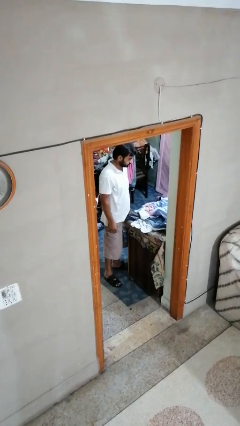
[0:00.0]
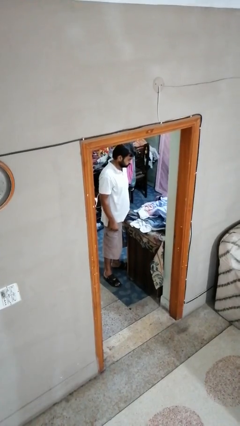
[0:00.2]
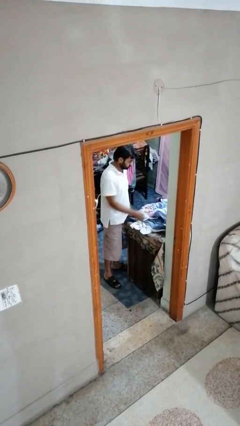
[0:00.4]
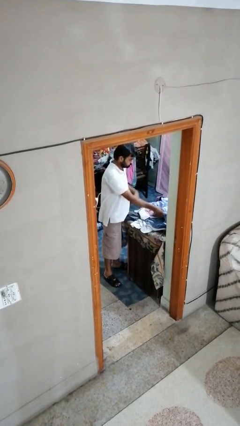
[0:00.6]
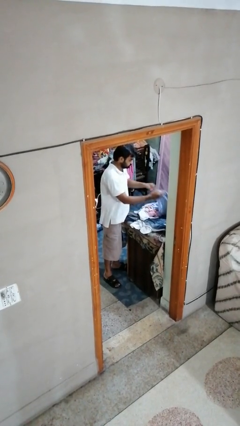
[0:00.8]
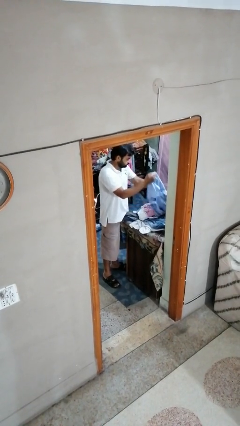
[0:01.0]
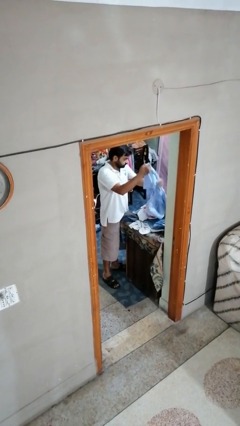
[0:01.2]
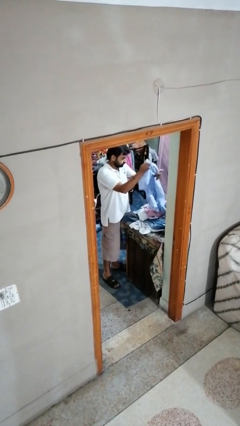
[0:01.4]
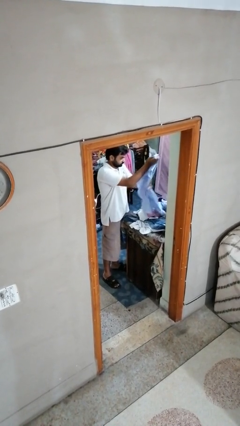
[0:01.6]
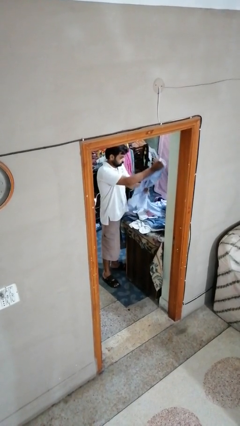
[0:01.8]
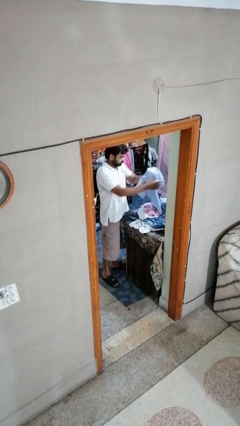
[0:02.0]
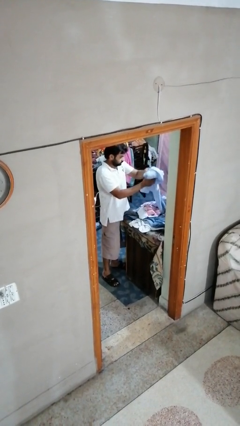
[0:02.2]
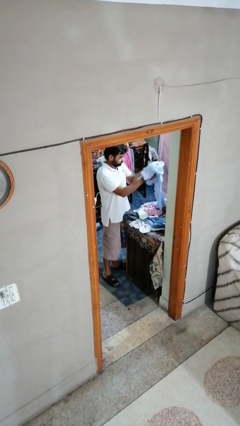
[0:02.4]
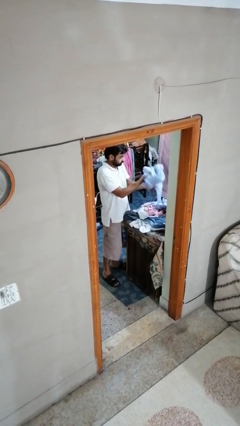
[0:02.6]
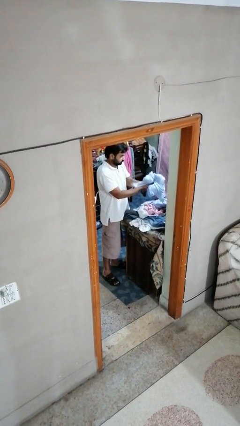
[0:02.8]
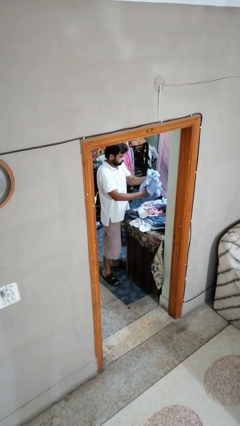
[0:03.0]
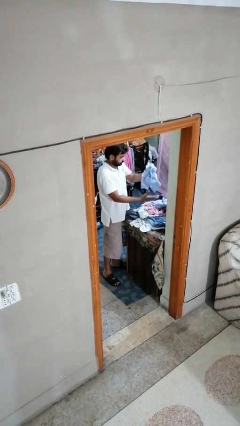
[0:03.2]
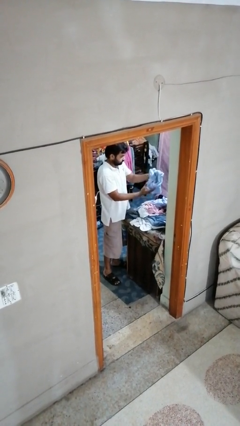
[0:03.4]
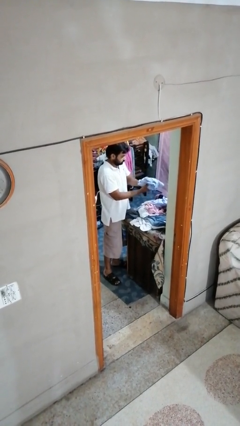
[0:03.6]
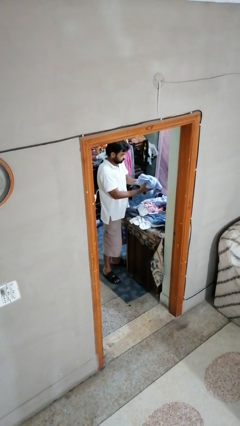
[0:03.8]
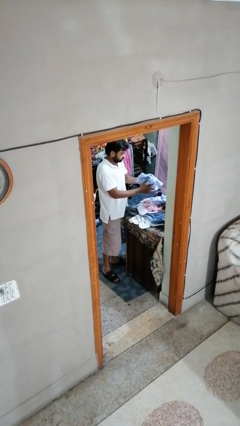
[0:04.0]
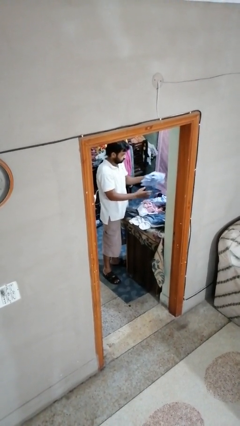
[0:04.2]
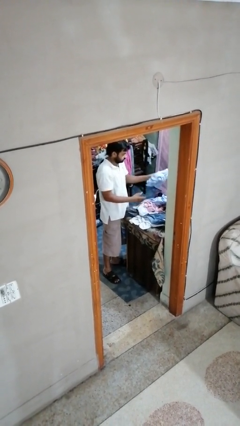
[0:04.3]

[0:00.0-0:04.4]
person folds shirt

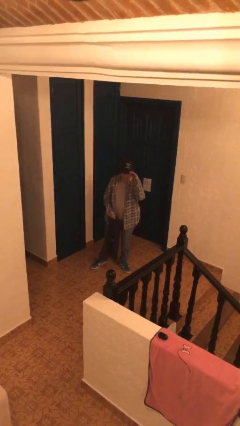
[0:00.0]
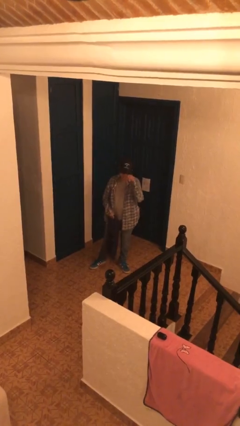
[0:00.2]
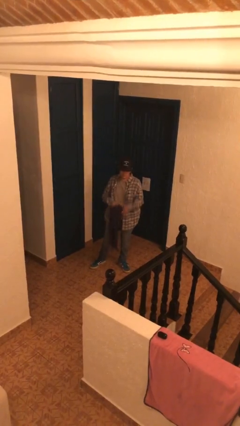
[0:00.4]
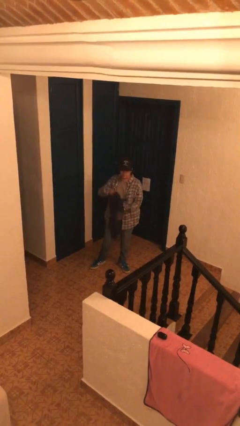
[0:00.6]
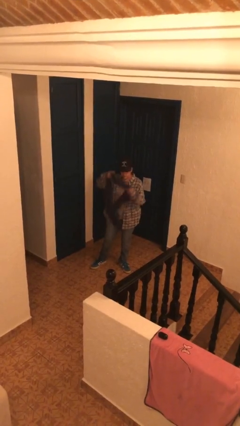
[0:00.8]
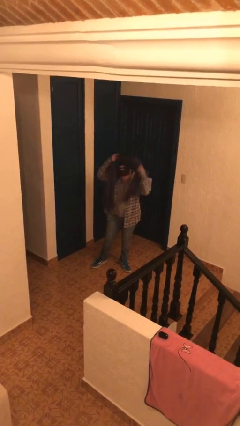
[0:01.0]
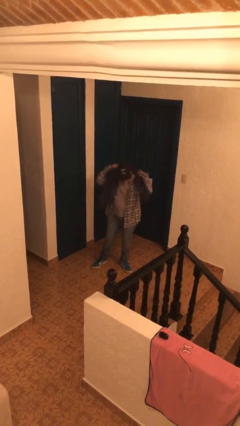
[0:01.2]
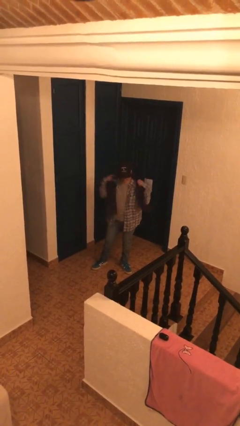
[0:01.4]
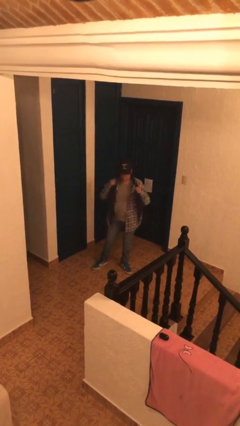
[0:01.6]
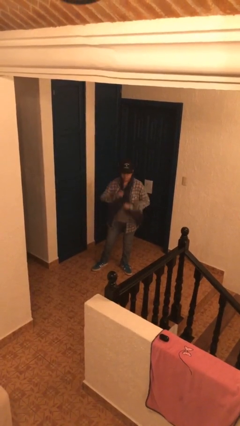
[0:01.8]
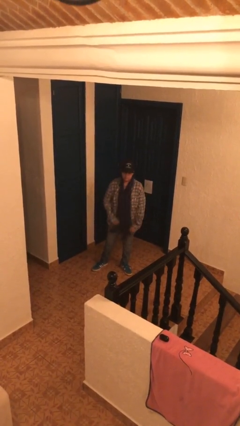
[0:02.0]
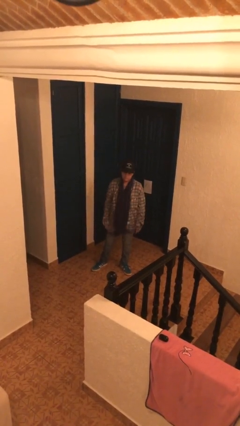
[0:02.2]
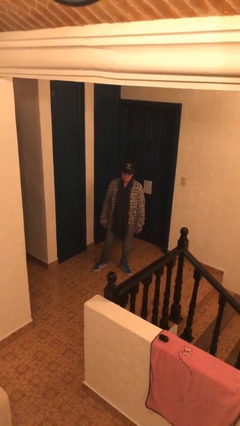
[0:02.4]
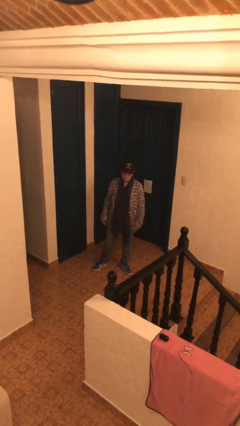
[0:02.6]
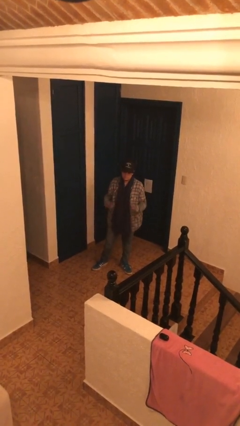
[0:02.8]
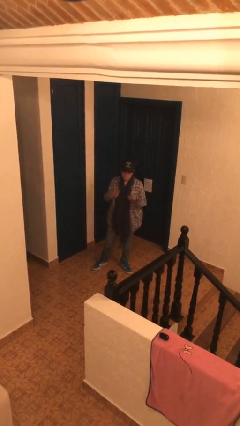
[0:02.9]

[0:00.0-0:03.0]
person puts on scarf

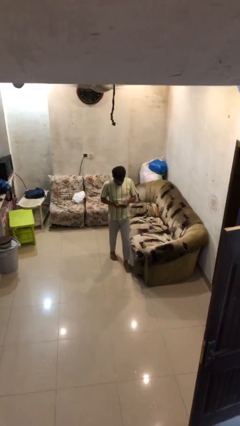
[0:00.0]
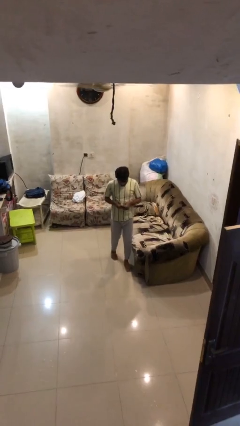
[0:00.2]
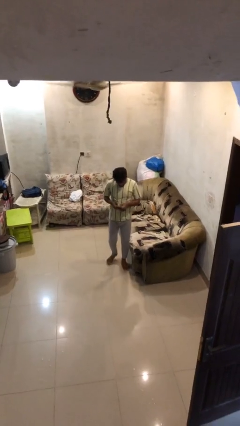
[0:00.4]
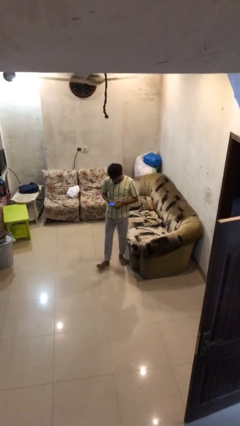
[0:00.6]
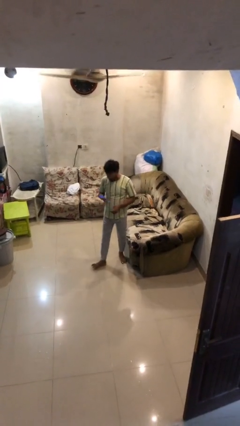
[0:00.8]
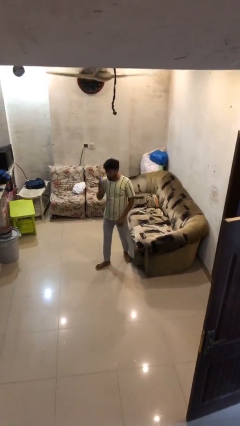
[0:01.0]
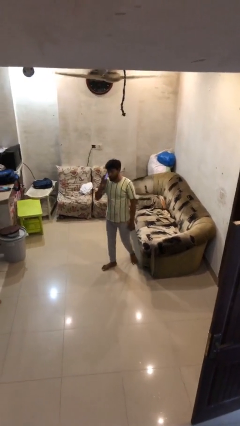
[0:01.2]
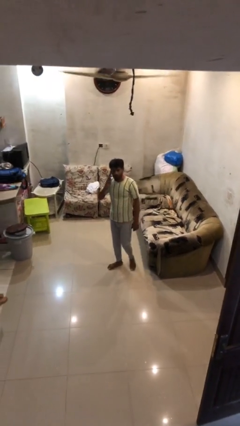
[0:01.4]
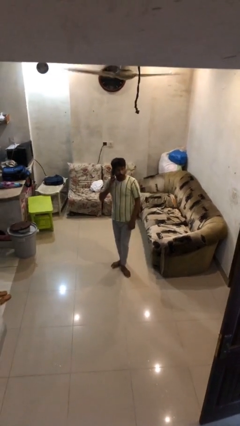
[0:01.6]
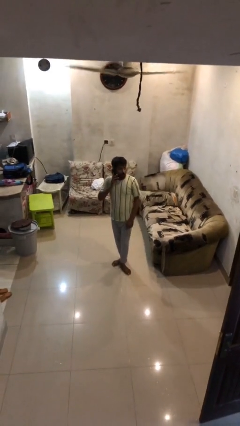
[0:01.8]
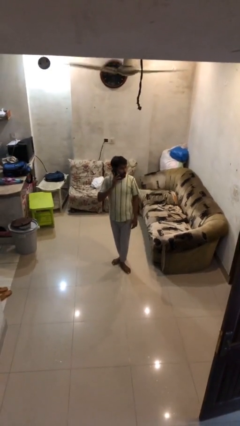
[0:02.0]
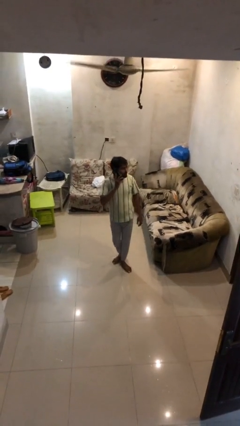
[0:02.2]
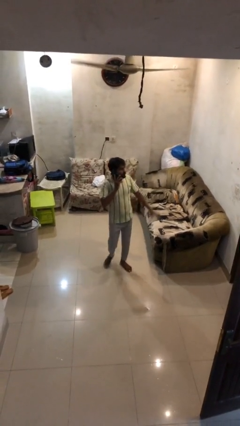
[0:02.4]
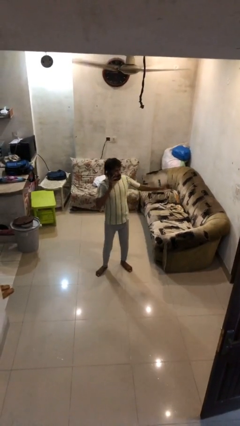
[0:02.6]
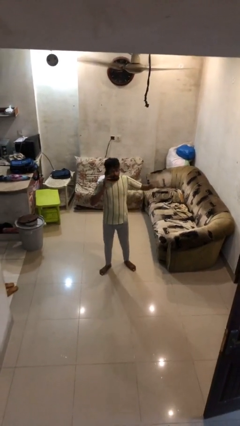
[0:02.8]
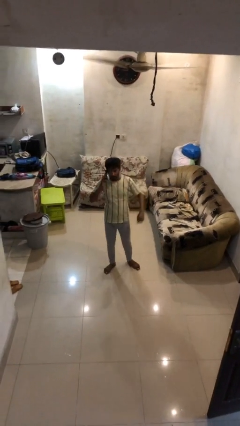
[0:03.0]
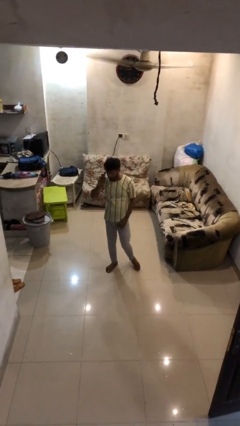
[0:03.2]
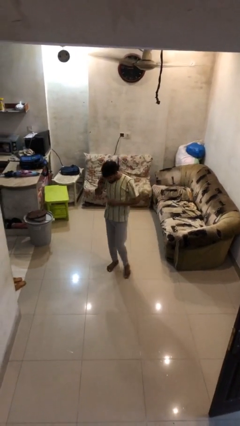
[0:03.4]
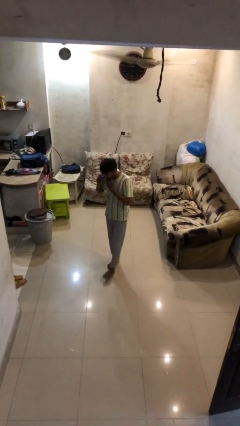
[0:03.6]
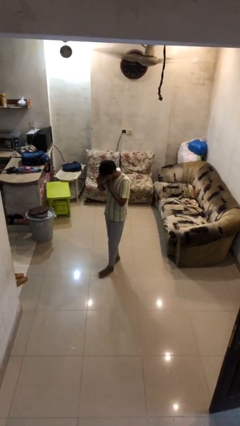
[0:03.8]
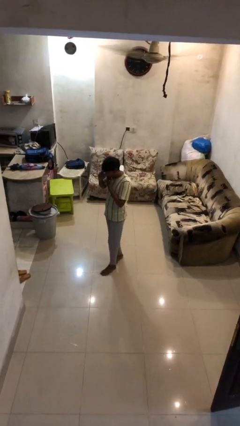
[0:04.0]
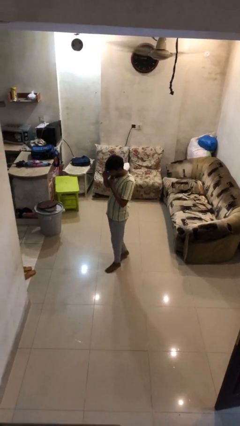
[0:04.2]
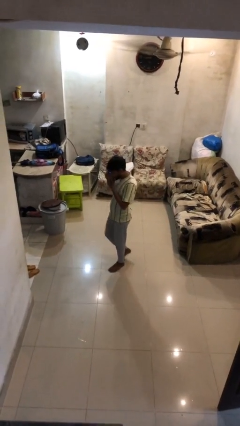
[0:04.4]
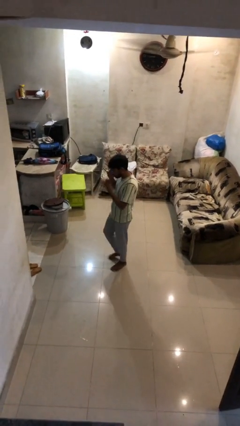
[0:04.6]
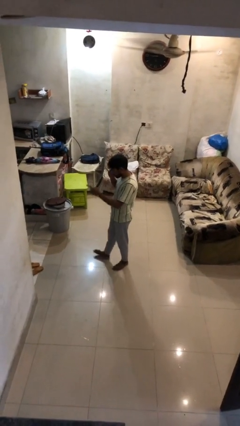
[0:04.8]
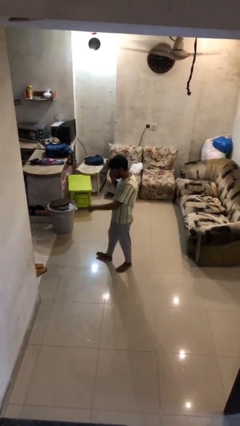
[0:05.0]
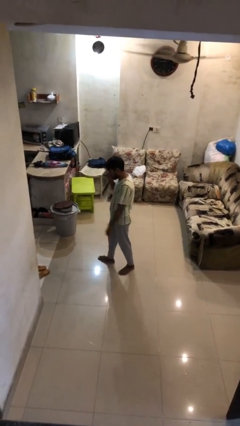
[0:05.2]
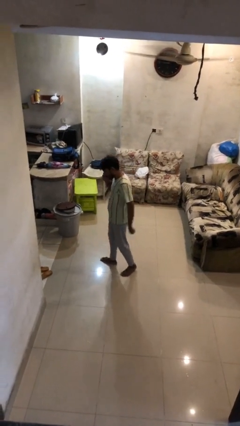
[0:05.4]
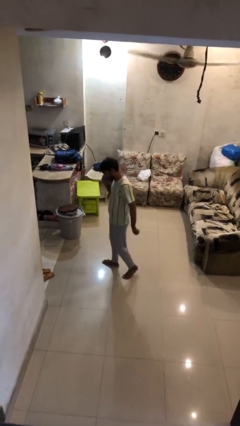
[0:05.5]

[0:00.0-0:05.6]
person talks on phone

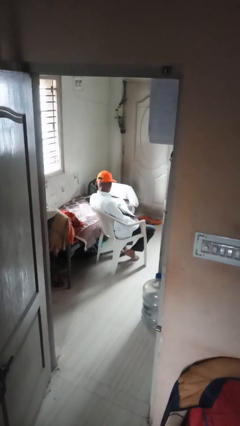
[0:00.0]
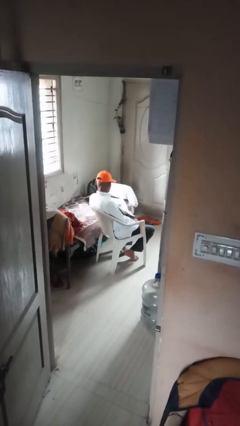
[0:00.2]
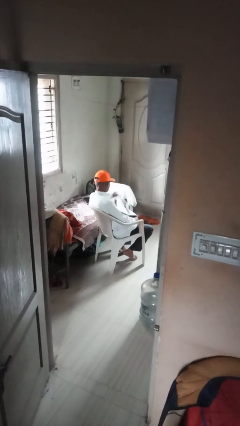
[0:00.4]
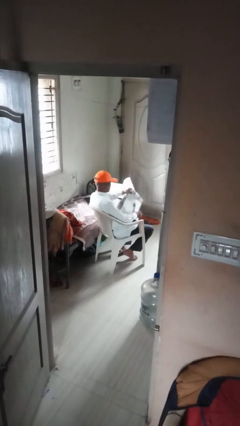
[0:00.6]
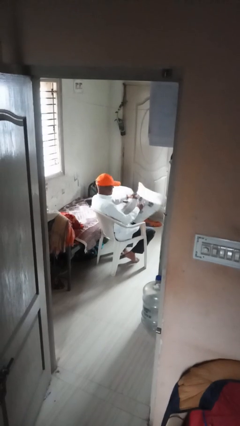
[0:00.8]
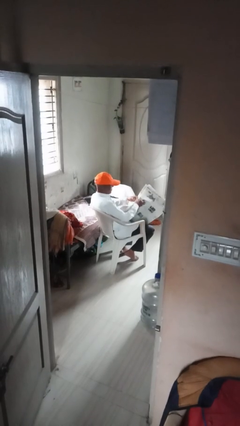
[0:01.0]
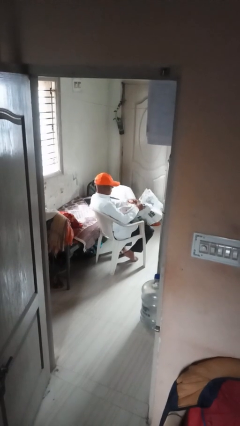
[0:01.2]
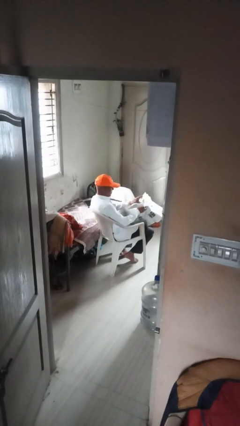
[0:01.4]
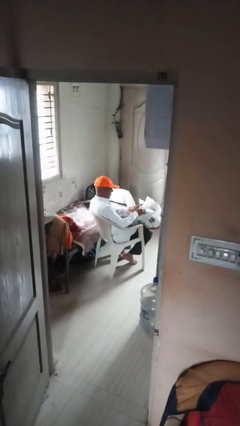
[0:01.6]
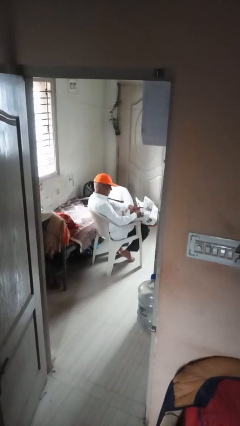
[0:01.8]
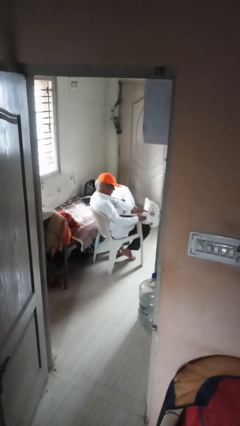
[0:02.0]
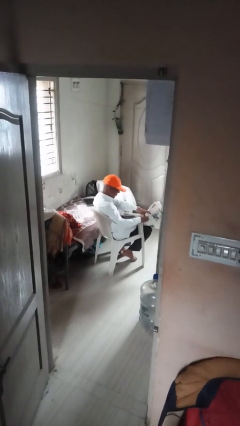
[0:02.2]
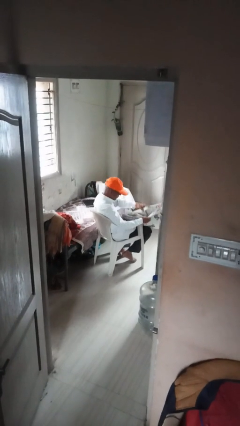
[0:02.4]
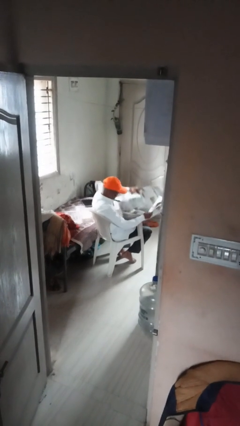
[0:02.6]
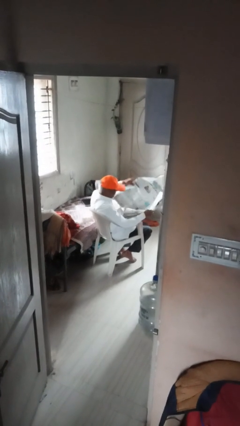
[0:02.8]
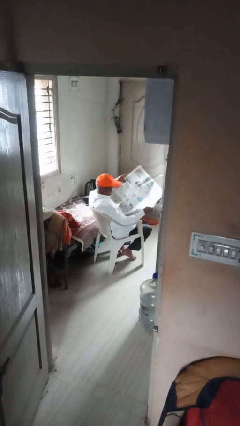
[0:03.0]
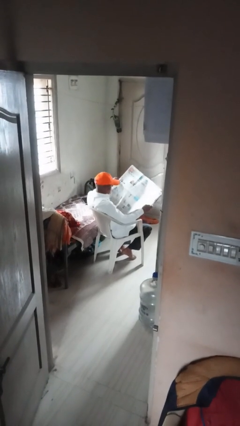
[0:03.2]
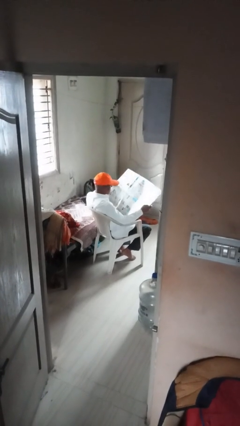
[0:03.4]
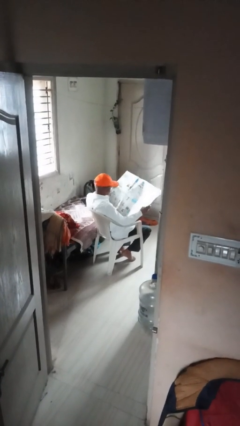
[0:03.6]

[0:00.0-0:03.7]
person reads newspaper

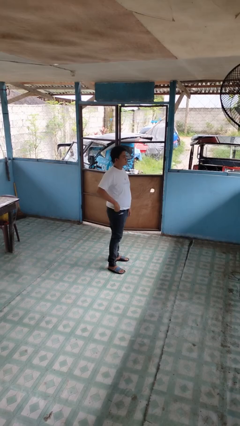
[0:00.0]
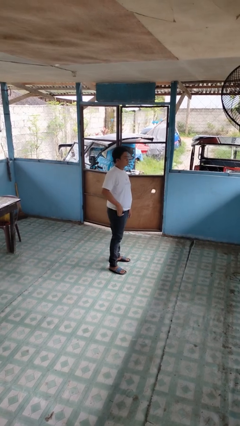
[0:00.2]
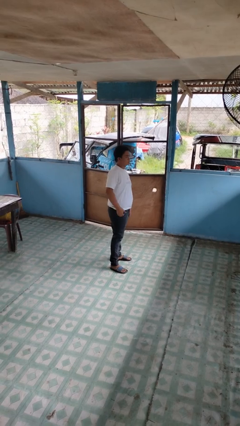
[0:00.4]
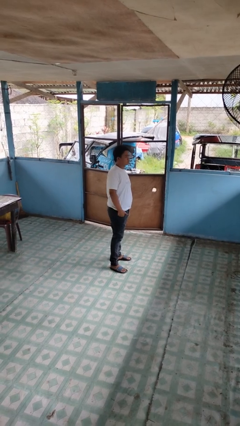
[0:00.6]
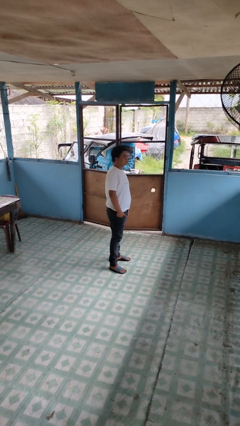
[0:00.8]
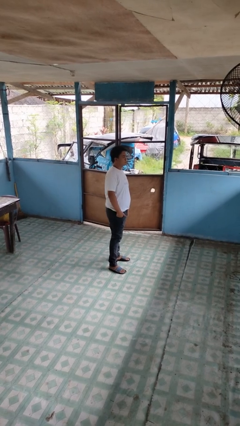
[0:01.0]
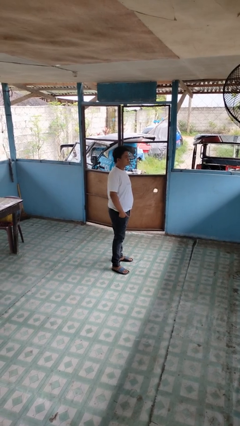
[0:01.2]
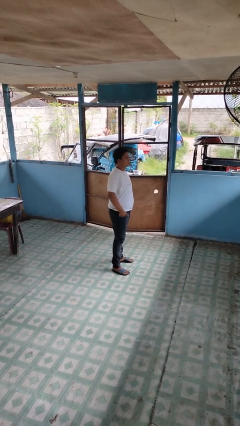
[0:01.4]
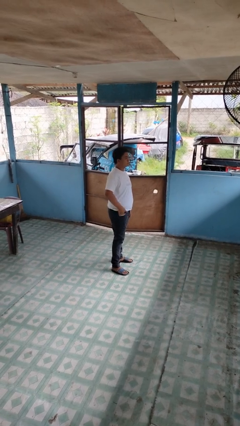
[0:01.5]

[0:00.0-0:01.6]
person puts hands in back pockets
